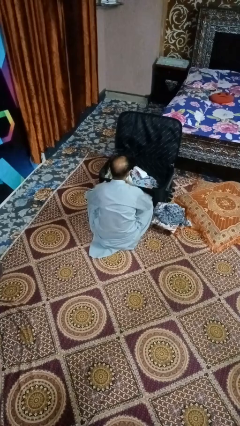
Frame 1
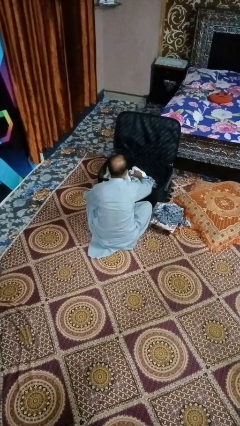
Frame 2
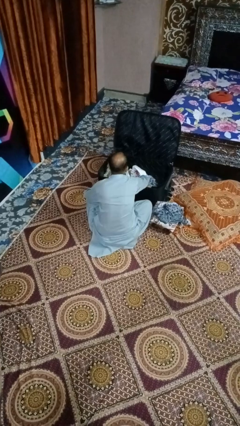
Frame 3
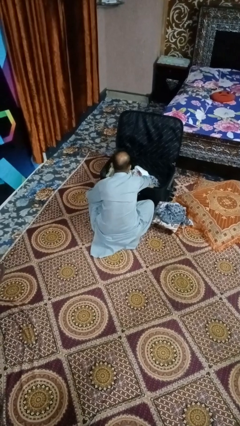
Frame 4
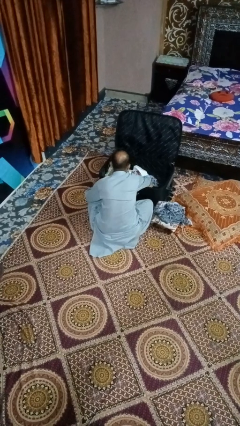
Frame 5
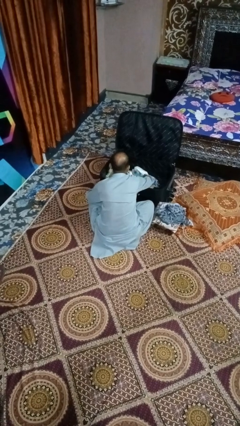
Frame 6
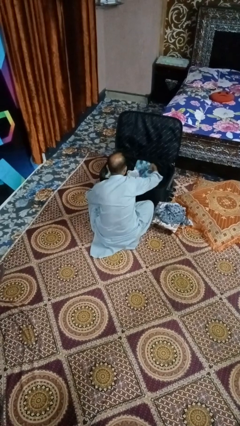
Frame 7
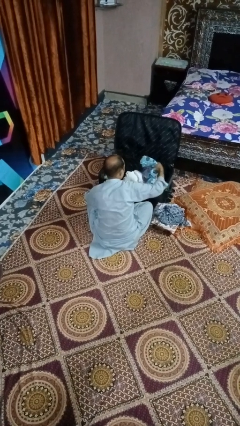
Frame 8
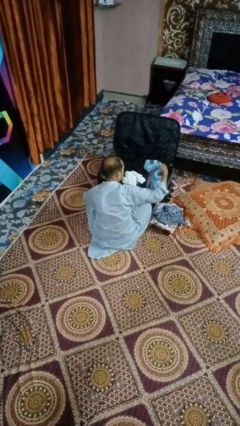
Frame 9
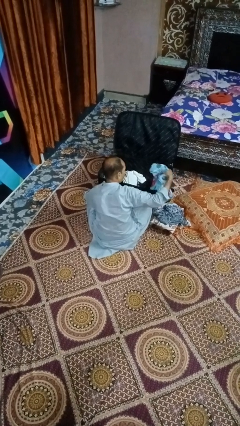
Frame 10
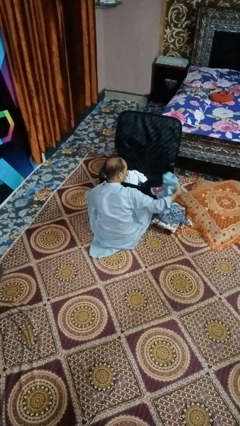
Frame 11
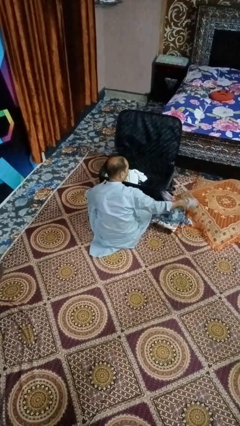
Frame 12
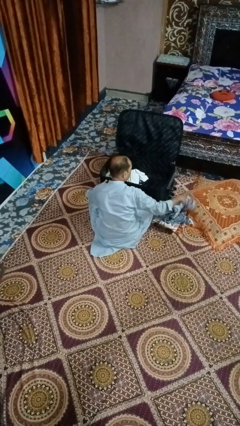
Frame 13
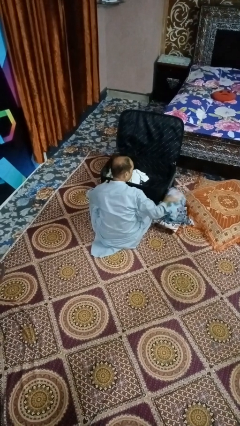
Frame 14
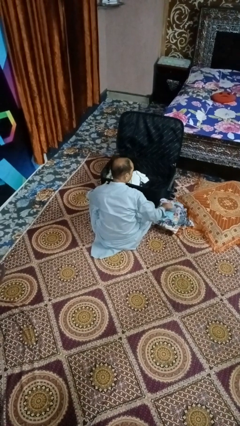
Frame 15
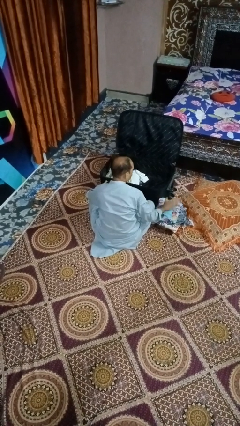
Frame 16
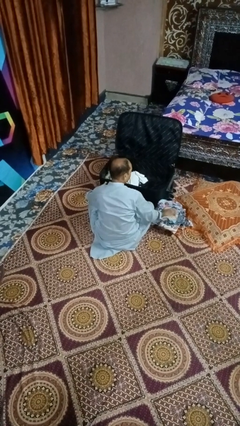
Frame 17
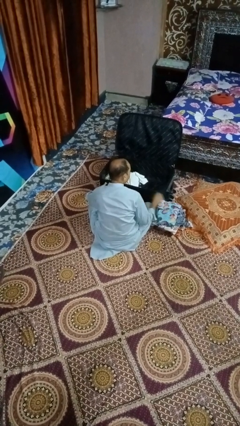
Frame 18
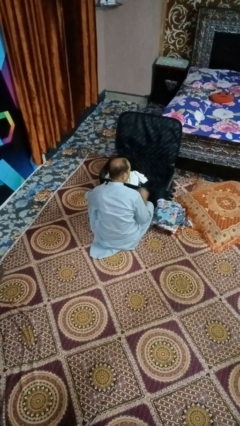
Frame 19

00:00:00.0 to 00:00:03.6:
person unloads clothes from suitcase

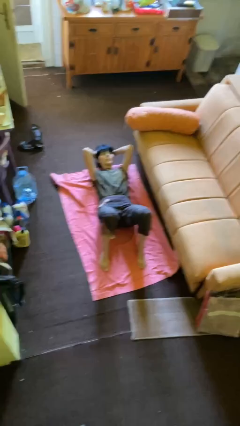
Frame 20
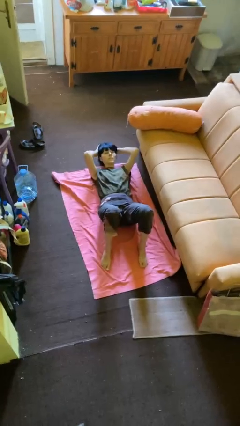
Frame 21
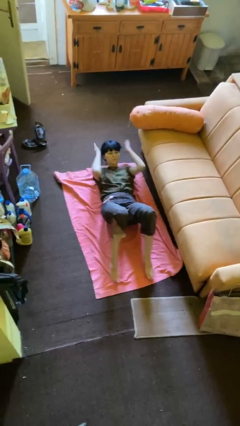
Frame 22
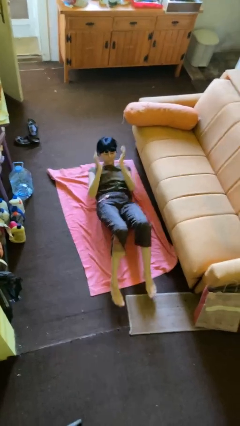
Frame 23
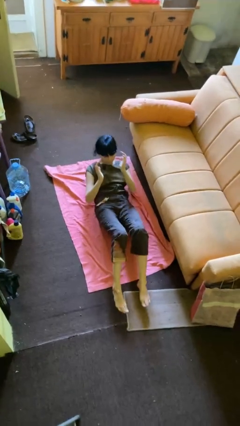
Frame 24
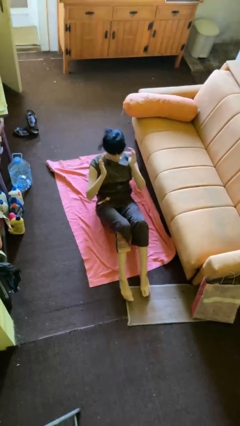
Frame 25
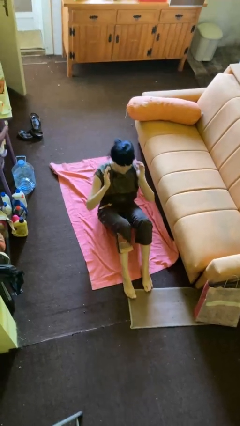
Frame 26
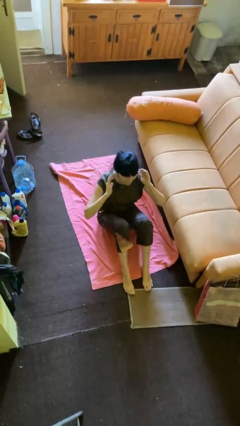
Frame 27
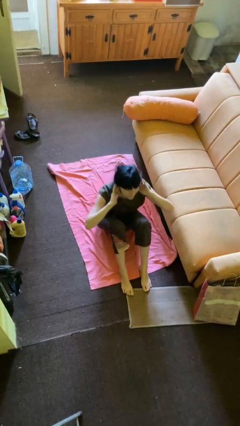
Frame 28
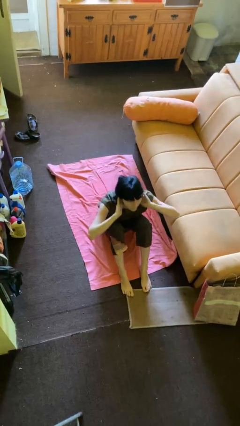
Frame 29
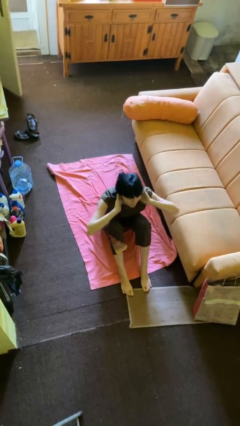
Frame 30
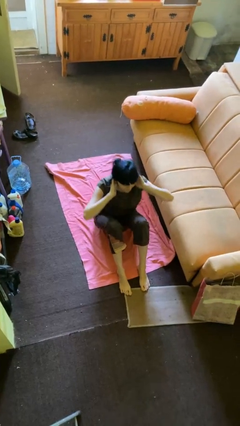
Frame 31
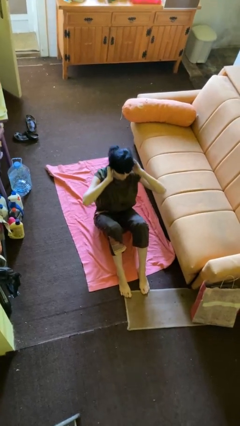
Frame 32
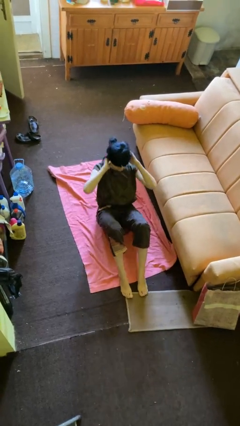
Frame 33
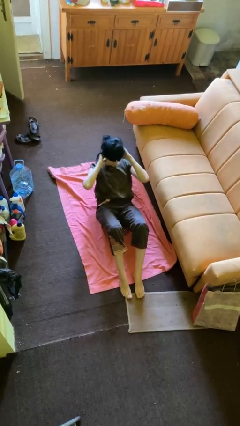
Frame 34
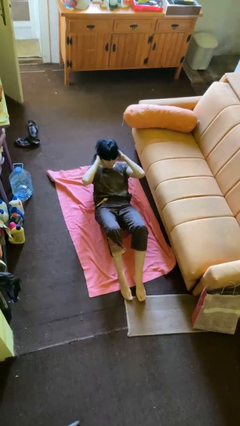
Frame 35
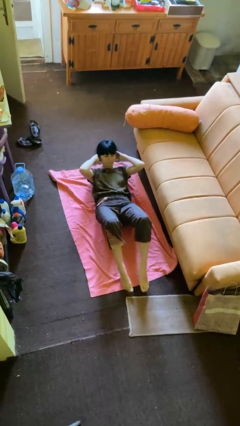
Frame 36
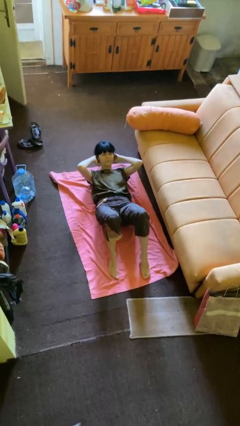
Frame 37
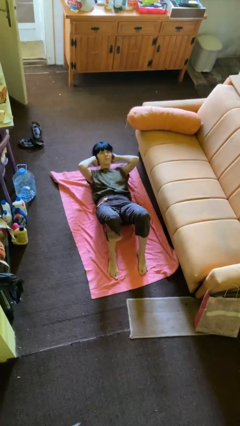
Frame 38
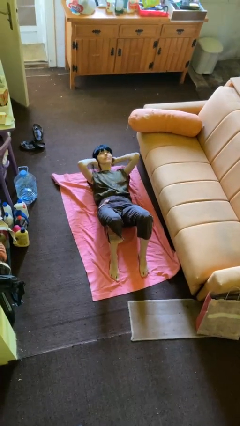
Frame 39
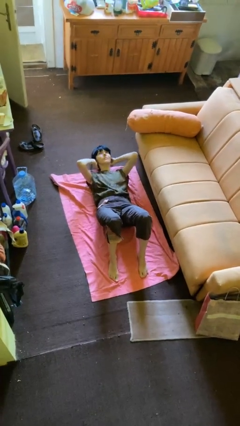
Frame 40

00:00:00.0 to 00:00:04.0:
person exercises with situp

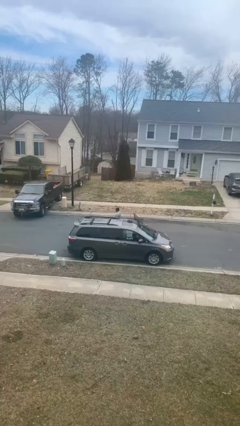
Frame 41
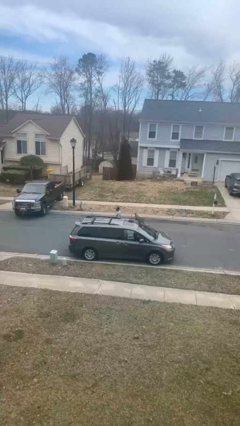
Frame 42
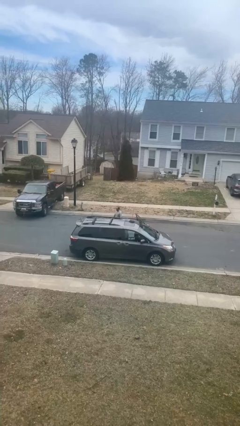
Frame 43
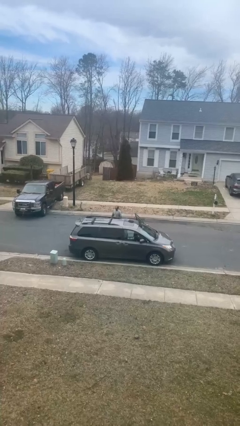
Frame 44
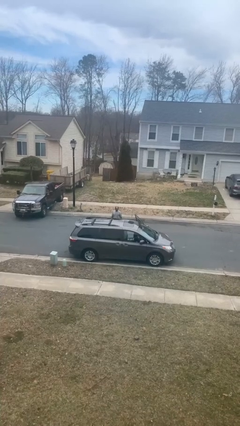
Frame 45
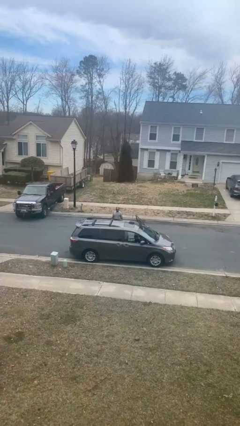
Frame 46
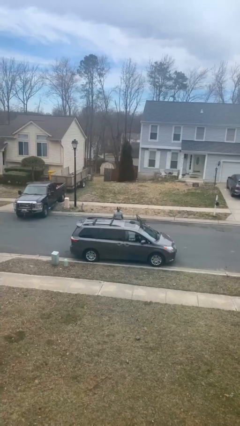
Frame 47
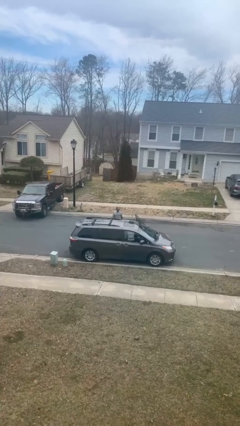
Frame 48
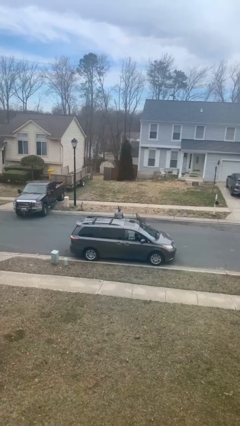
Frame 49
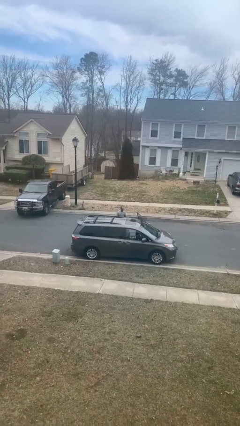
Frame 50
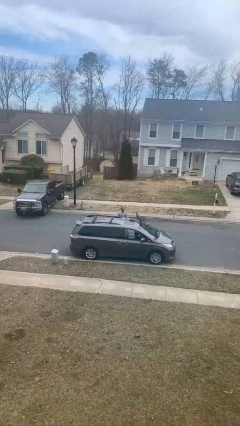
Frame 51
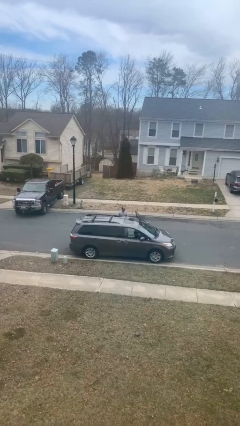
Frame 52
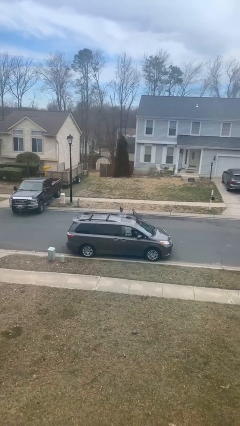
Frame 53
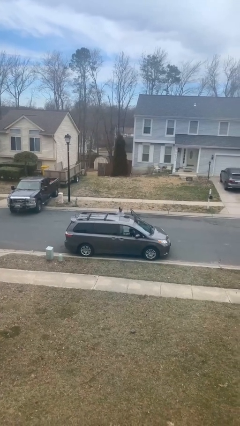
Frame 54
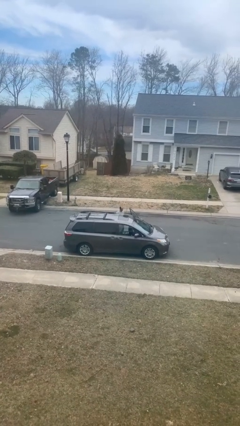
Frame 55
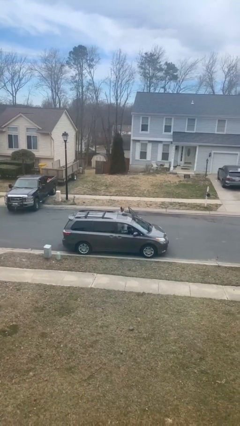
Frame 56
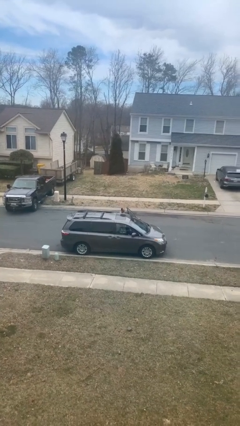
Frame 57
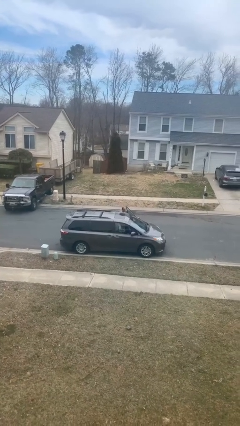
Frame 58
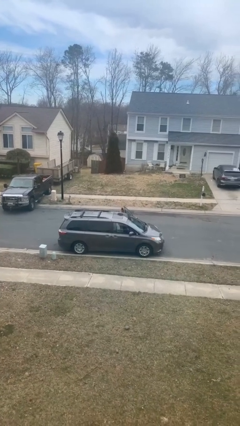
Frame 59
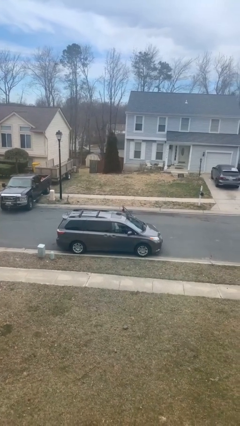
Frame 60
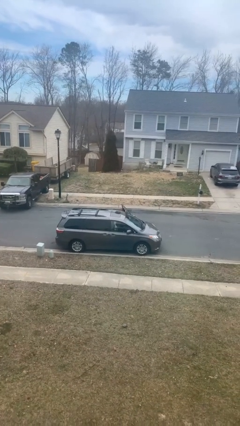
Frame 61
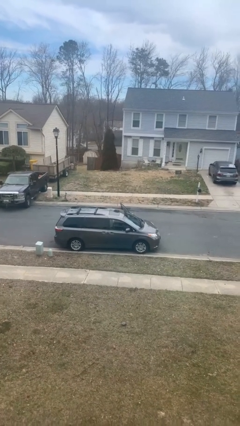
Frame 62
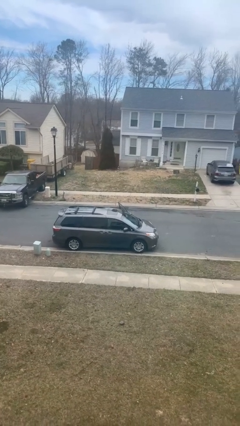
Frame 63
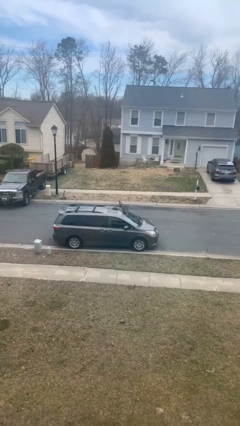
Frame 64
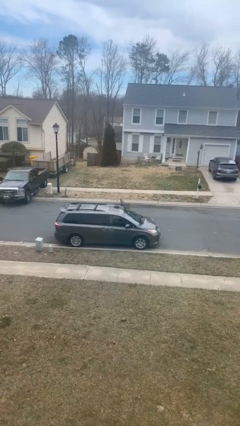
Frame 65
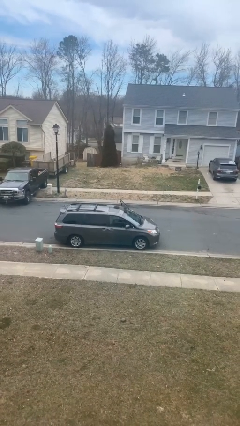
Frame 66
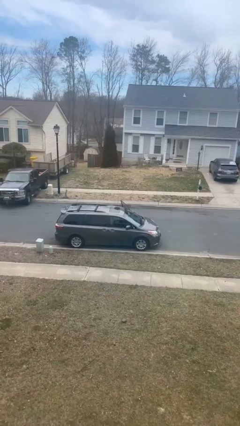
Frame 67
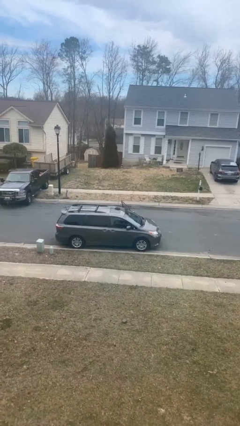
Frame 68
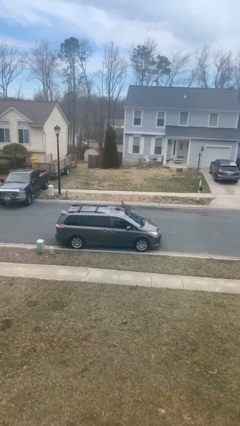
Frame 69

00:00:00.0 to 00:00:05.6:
person enters car

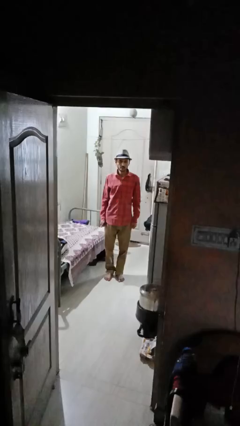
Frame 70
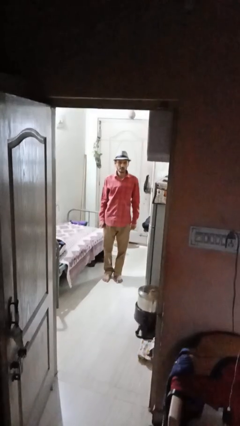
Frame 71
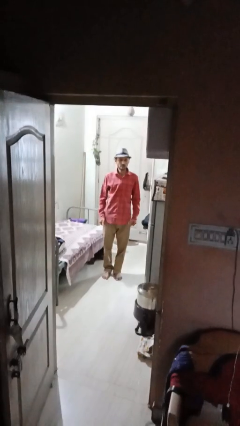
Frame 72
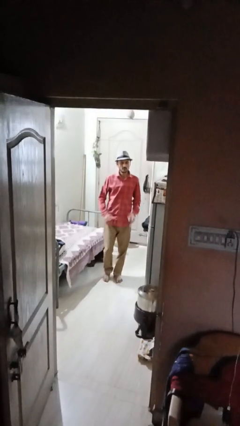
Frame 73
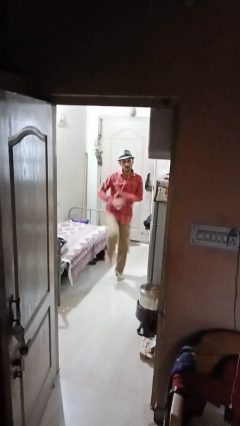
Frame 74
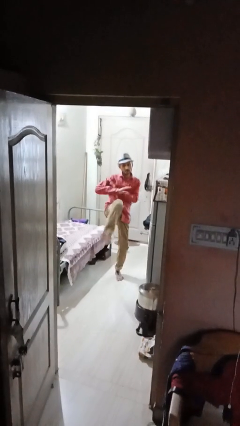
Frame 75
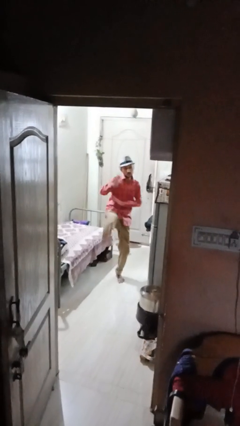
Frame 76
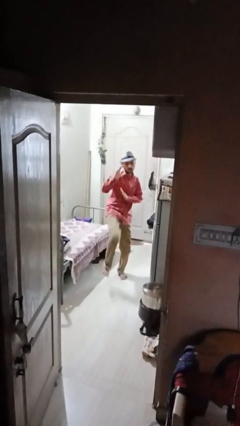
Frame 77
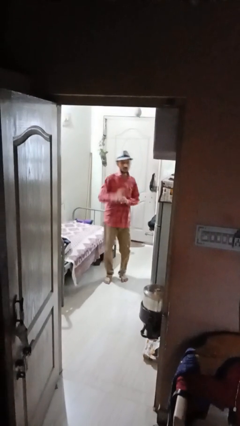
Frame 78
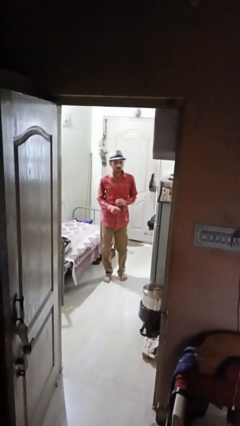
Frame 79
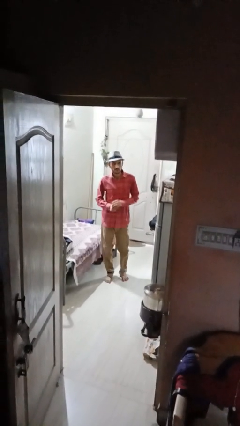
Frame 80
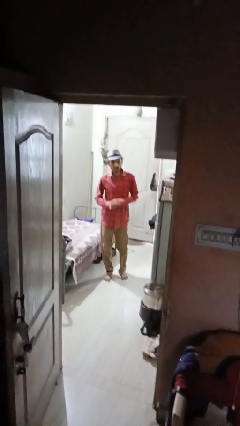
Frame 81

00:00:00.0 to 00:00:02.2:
person karate kicks

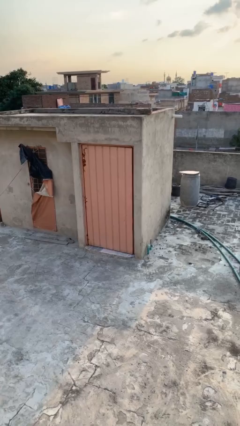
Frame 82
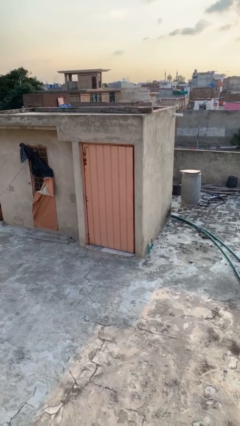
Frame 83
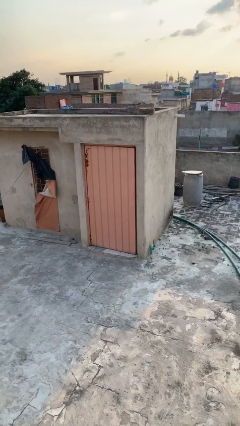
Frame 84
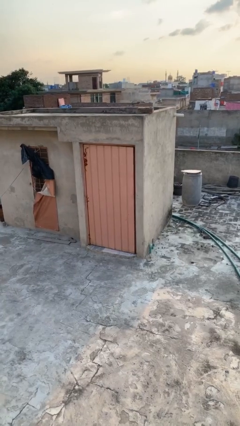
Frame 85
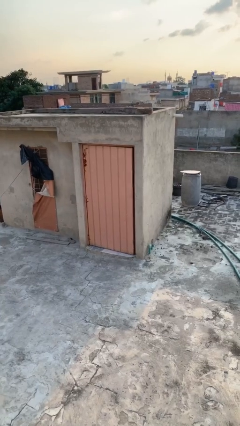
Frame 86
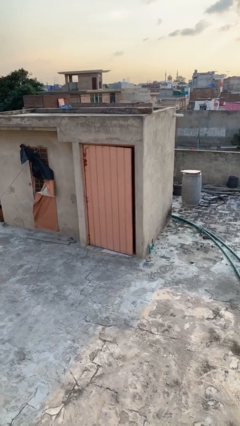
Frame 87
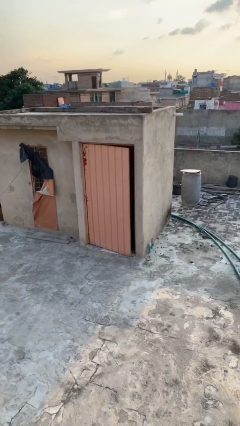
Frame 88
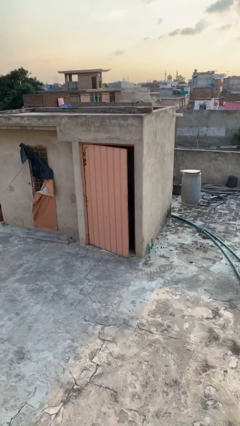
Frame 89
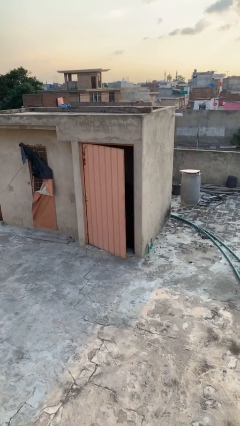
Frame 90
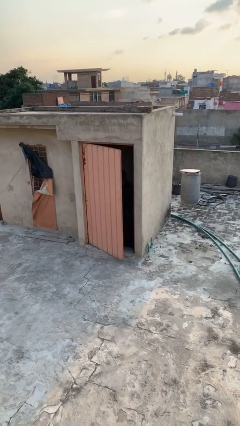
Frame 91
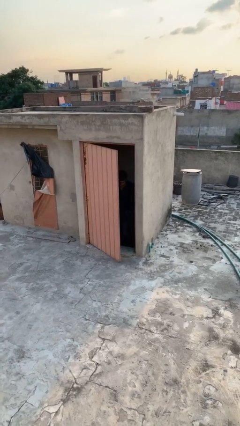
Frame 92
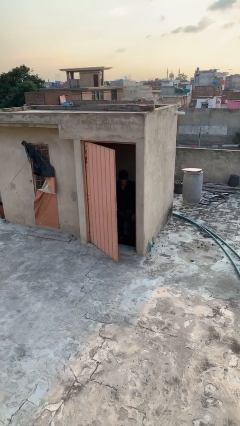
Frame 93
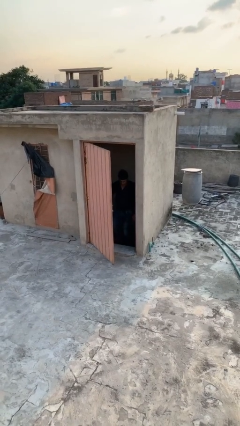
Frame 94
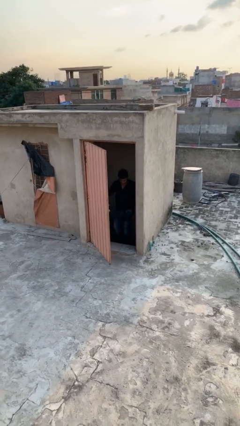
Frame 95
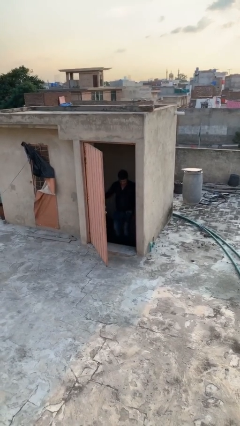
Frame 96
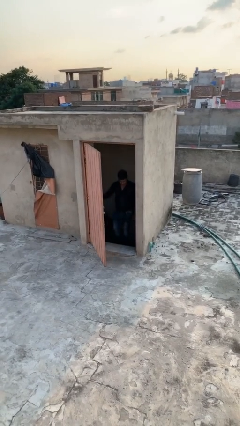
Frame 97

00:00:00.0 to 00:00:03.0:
person opens facility door
